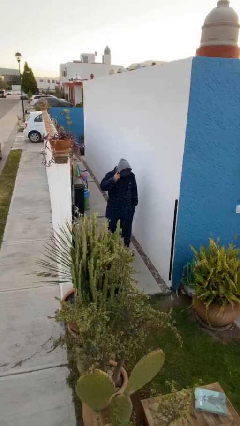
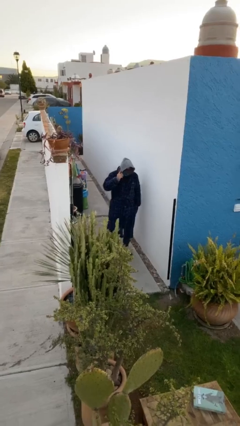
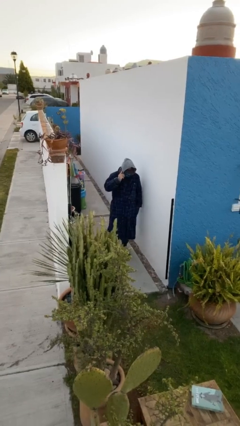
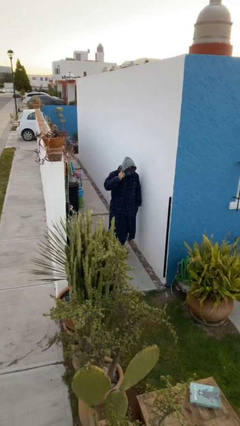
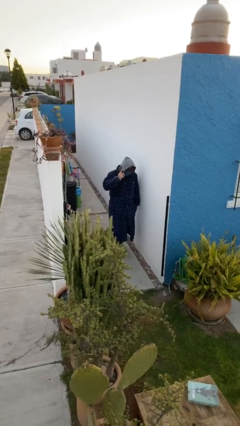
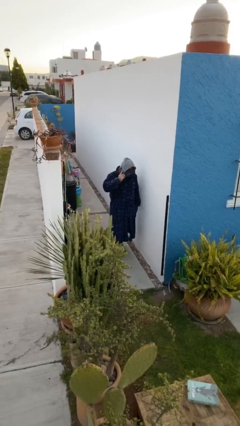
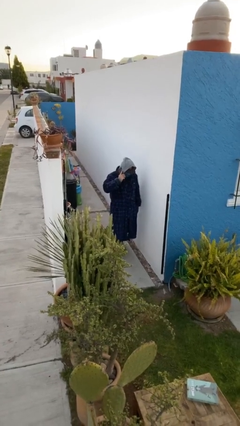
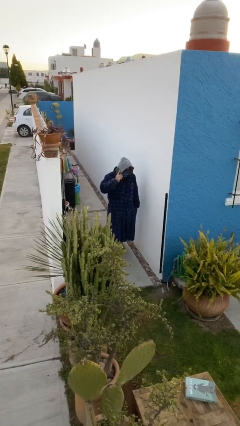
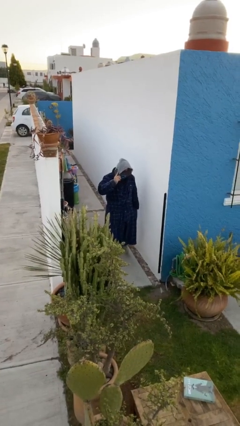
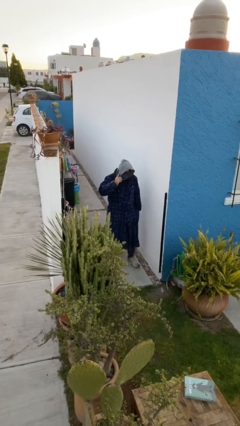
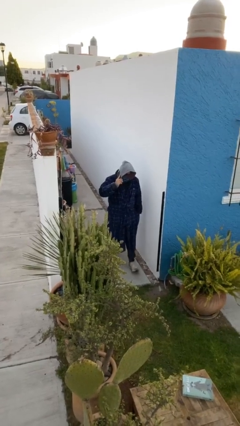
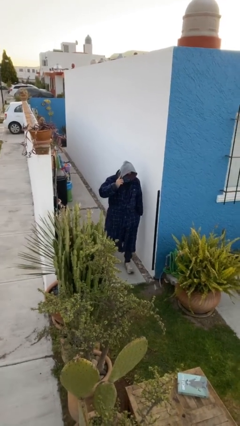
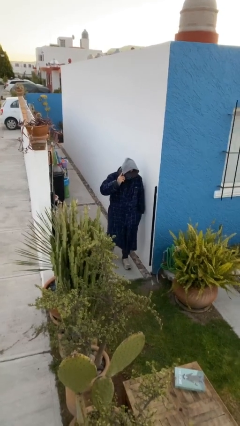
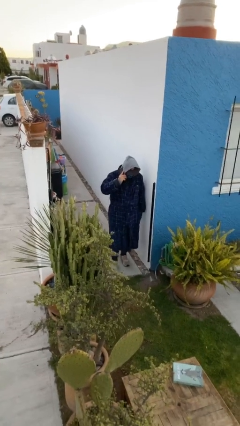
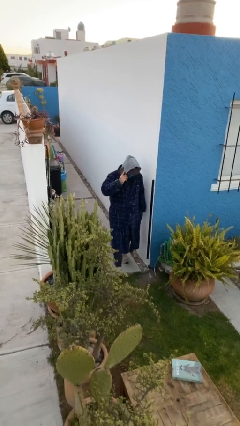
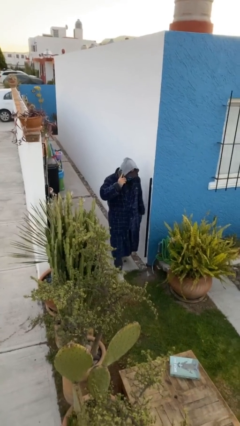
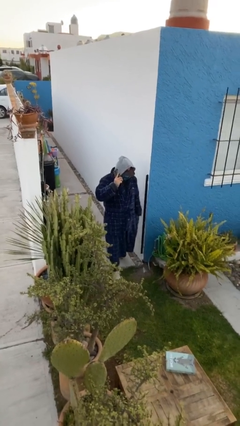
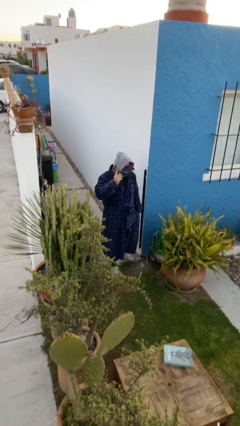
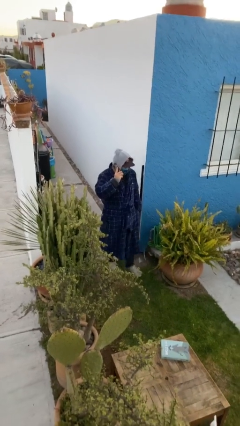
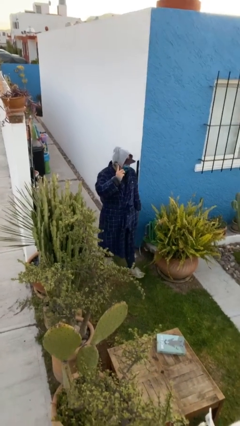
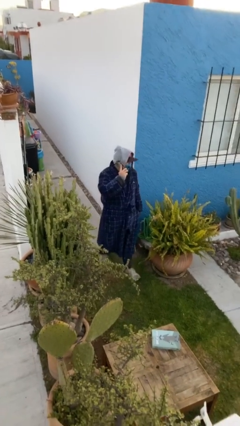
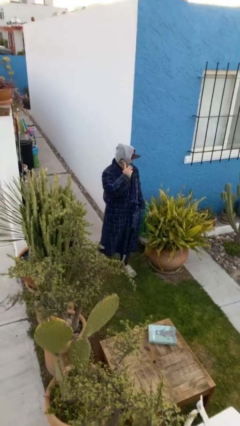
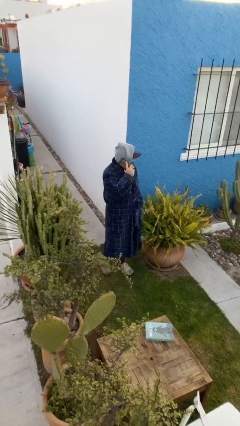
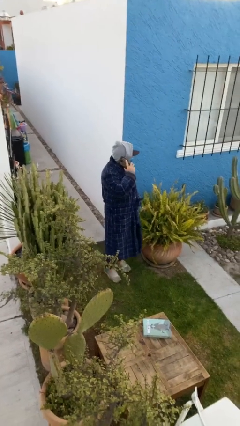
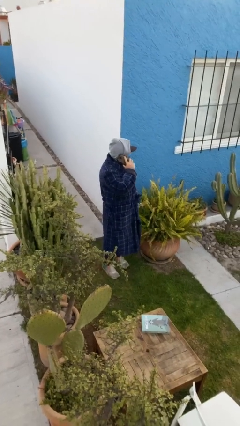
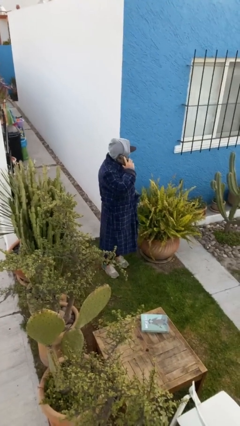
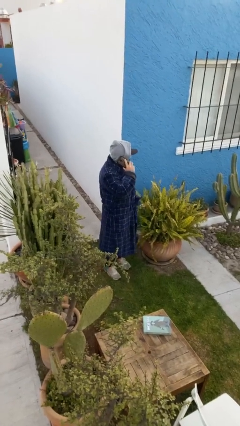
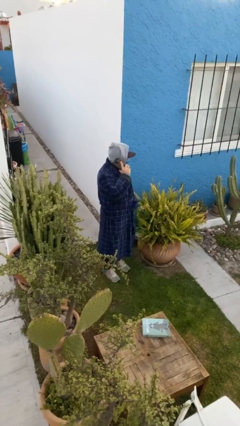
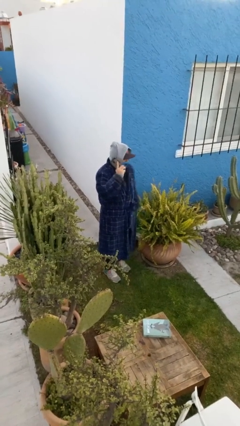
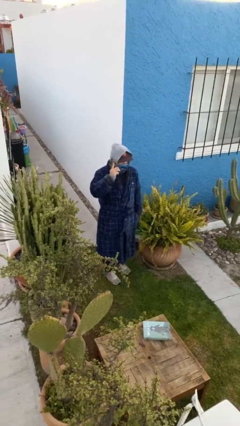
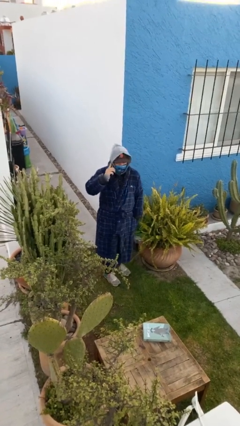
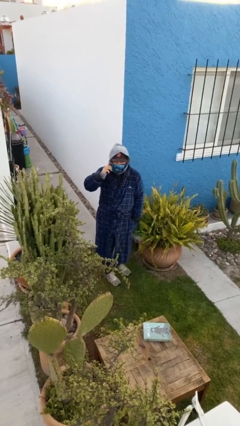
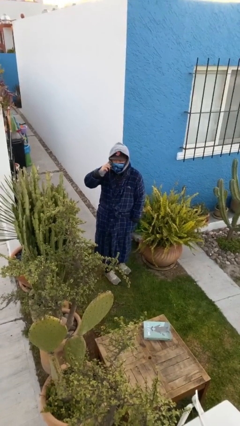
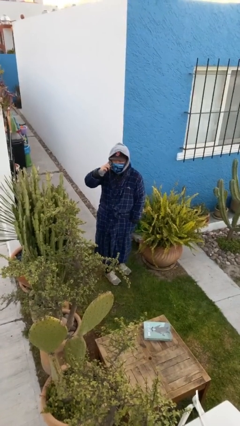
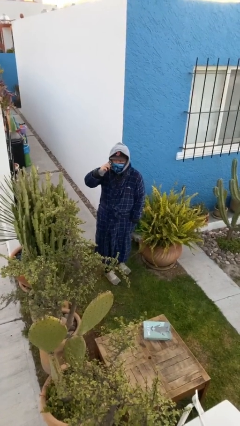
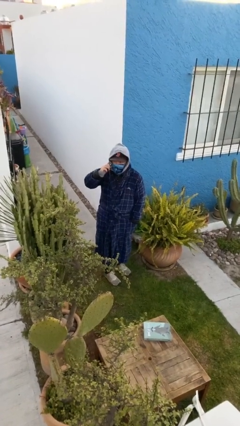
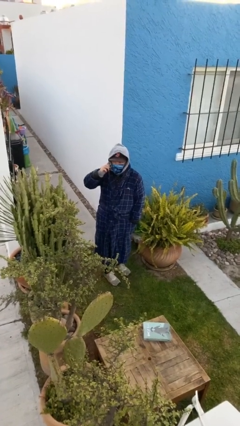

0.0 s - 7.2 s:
person enters scene through structure

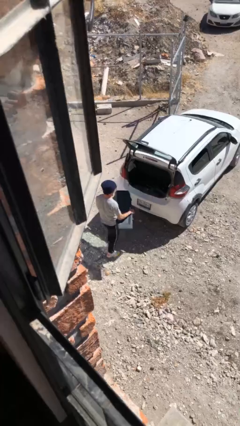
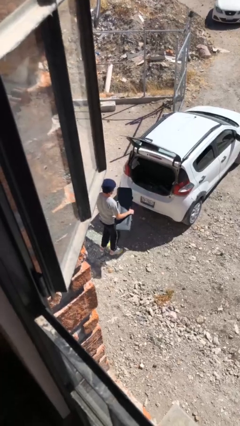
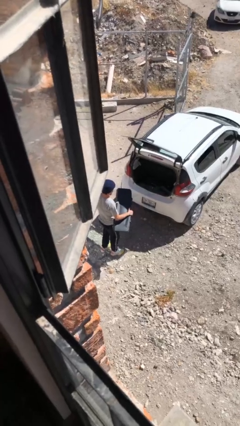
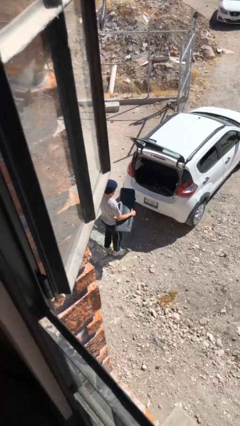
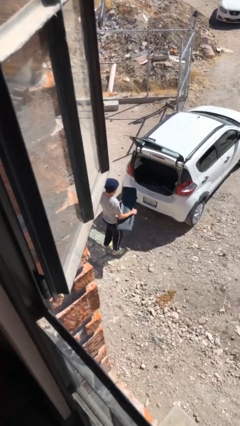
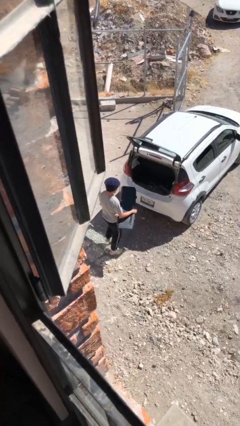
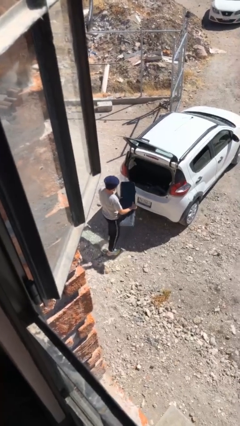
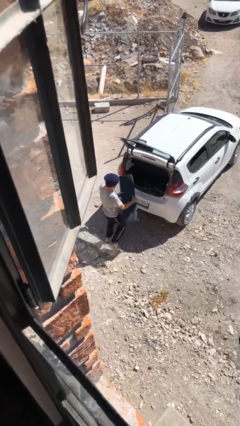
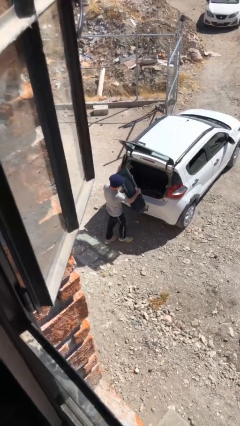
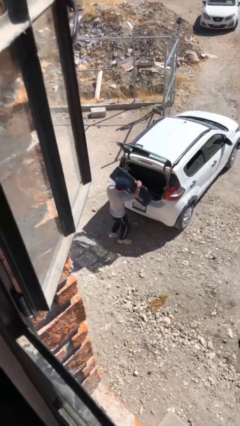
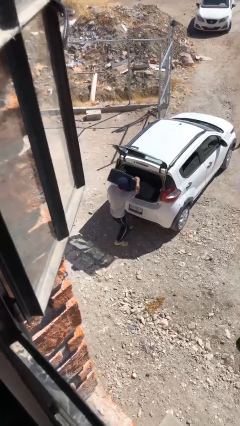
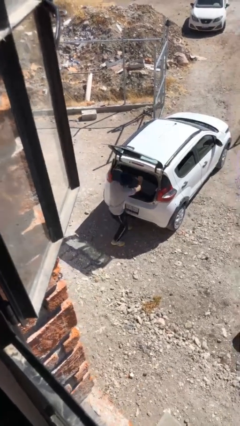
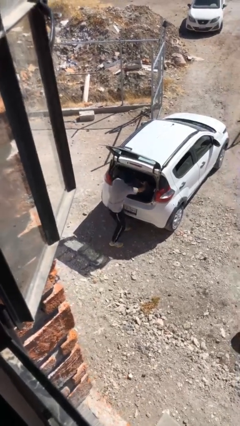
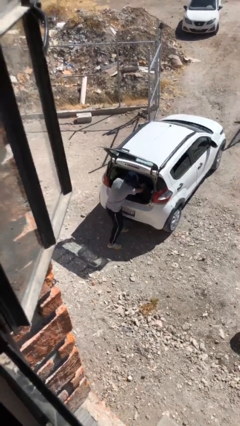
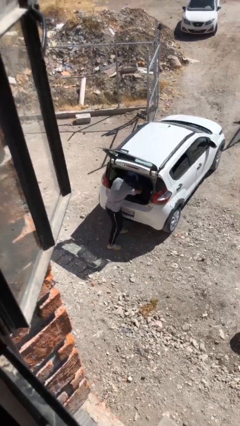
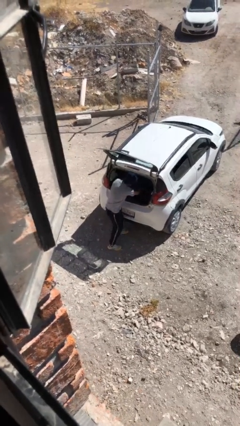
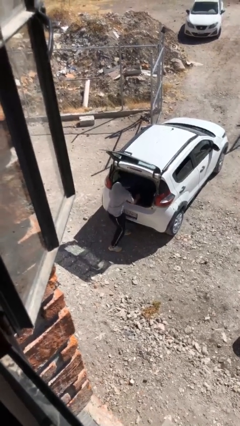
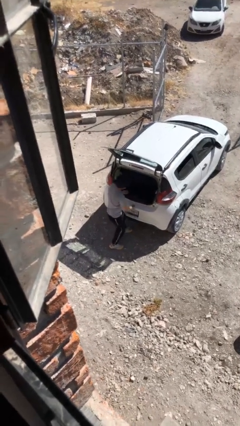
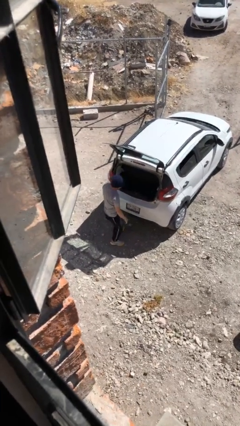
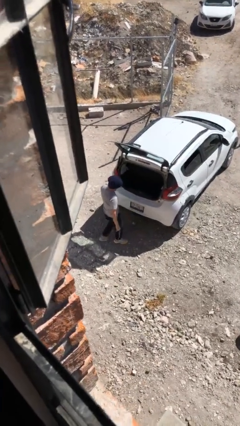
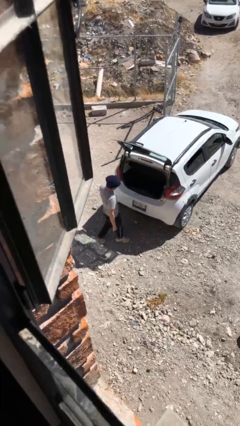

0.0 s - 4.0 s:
person loads car

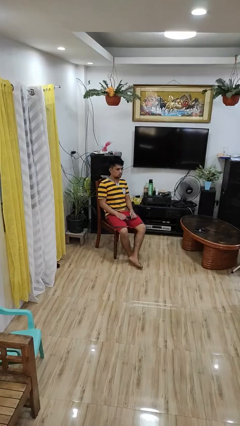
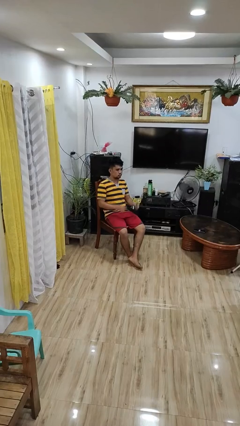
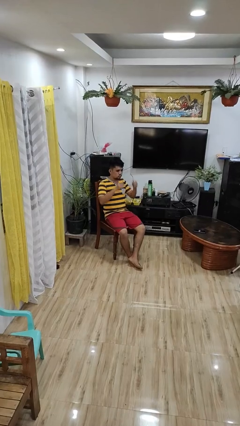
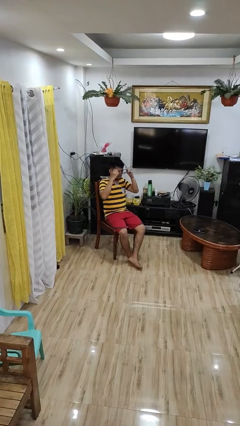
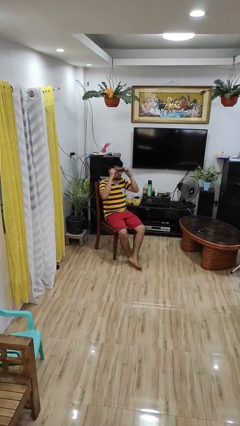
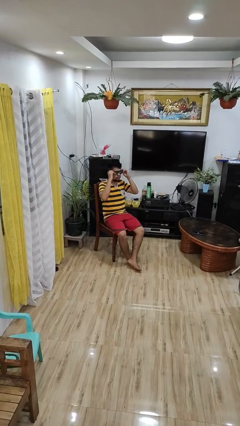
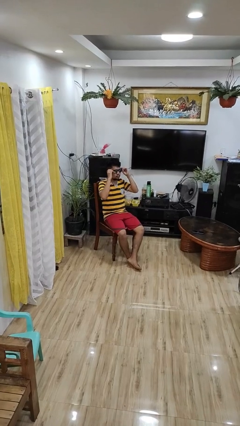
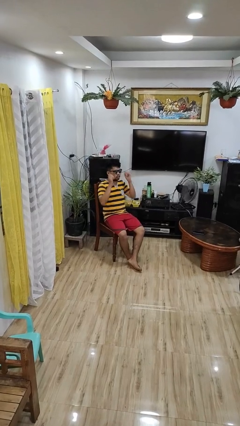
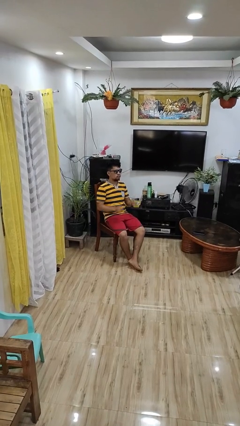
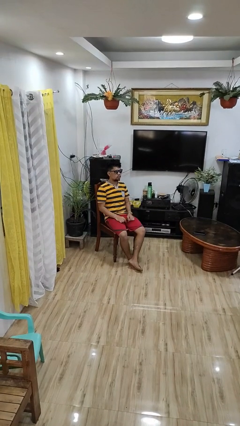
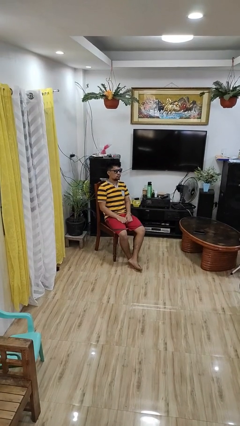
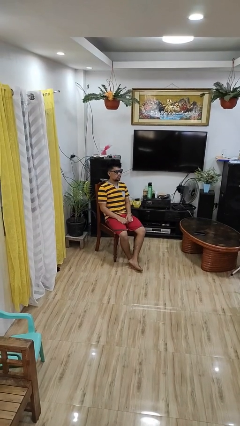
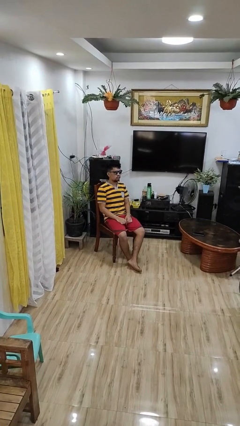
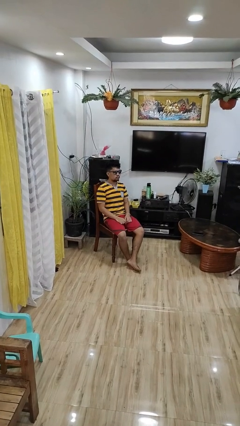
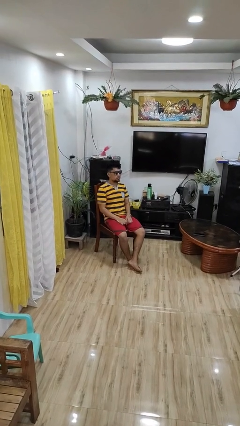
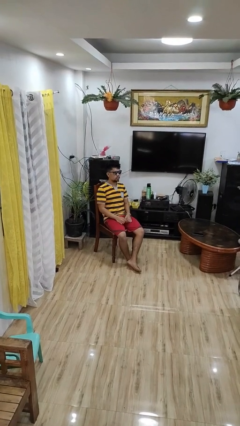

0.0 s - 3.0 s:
person puts on sunglasses

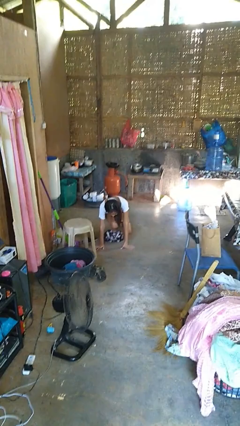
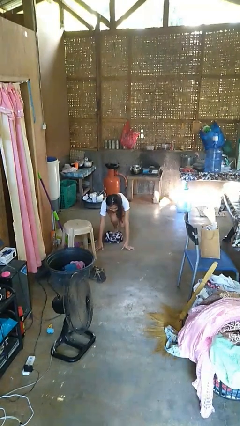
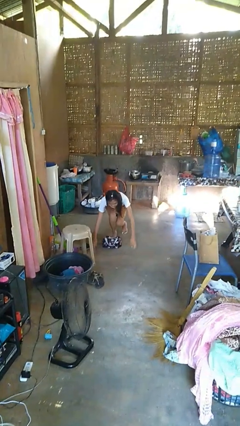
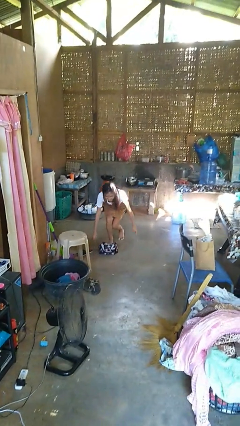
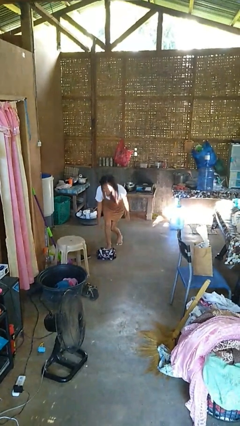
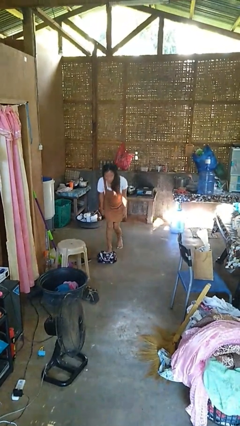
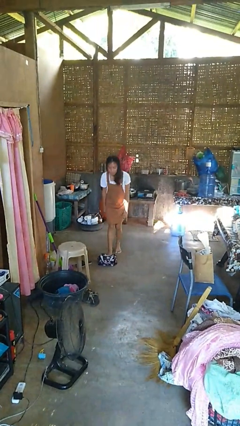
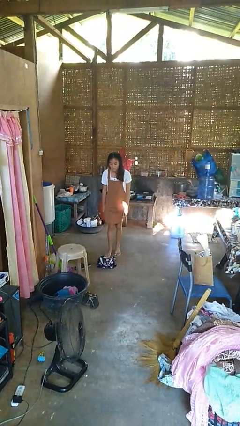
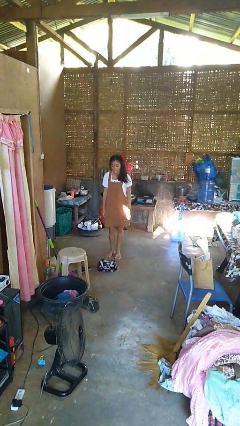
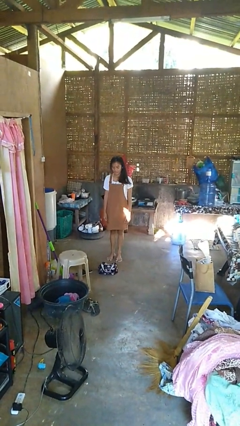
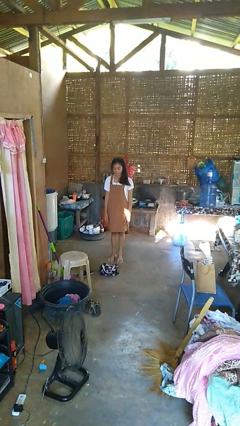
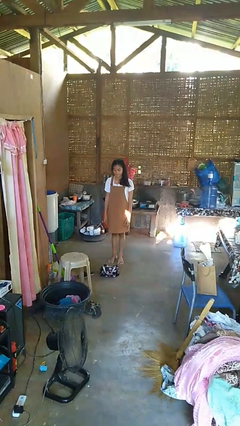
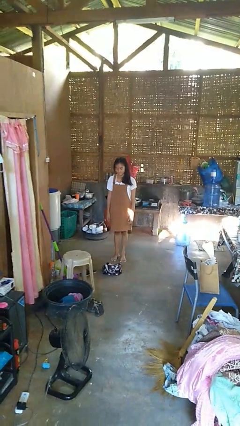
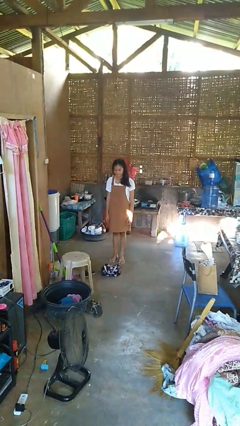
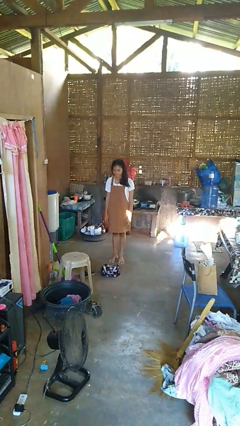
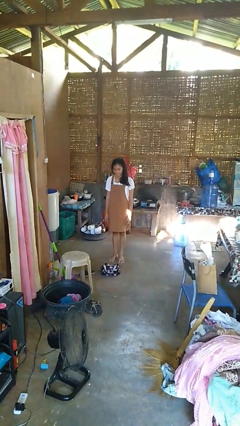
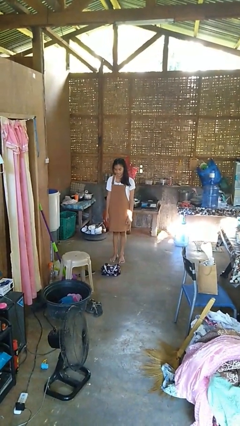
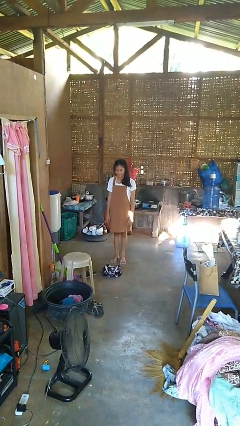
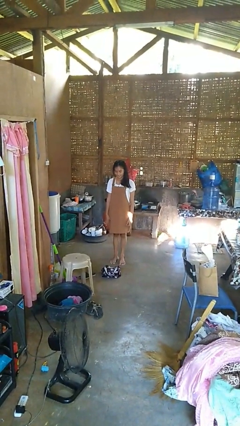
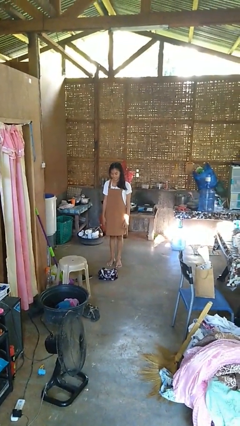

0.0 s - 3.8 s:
person stands up from floor
